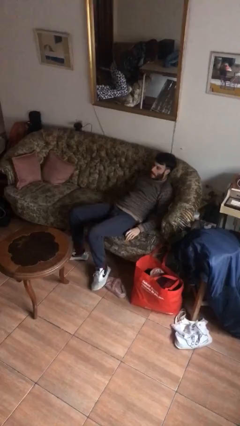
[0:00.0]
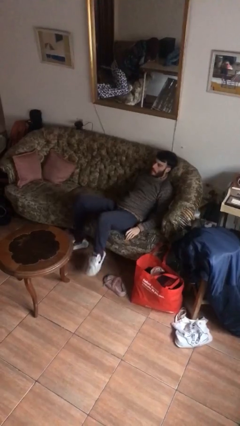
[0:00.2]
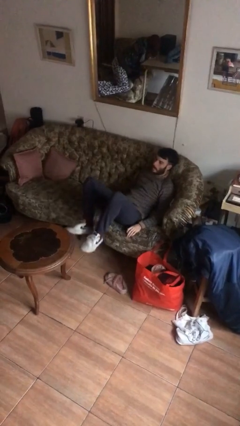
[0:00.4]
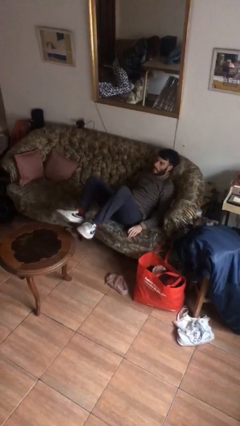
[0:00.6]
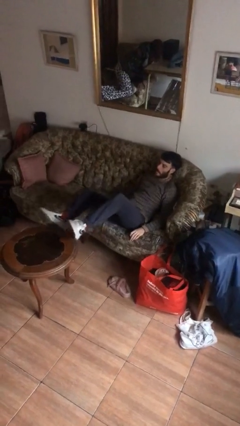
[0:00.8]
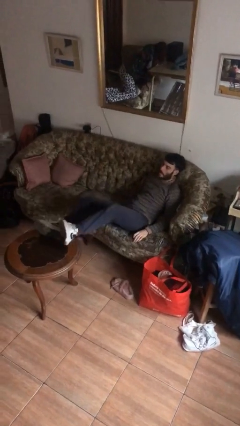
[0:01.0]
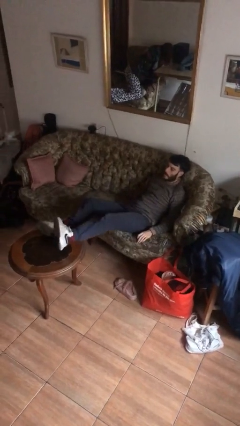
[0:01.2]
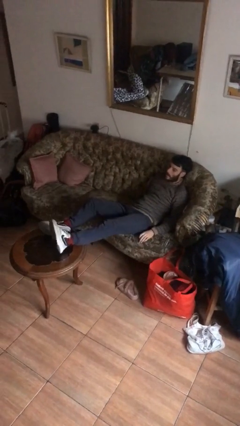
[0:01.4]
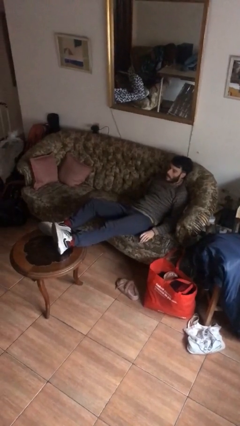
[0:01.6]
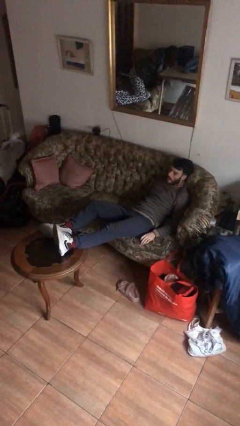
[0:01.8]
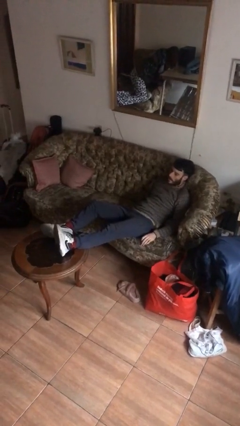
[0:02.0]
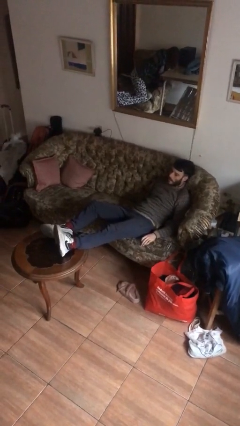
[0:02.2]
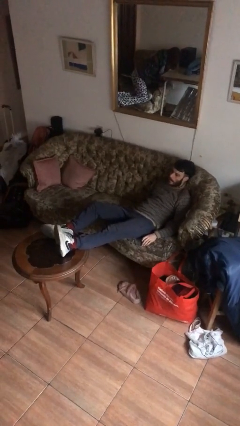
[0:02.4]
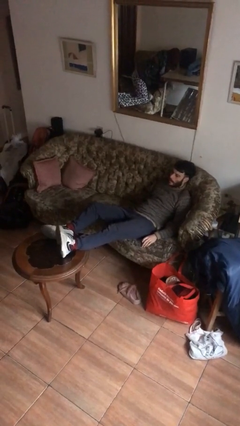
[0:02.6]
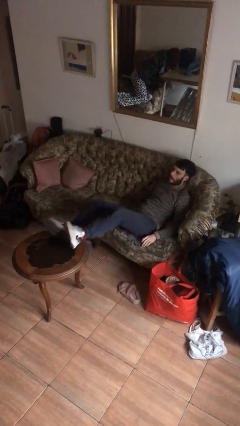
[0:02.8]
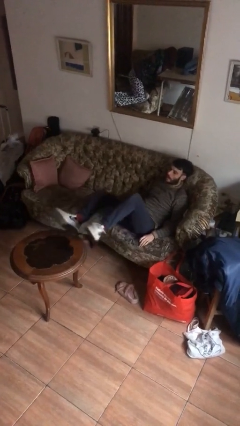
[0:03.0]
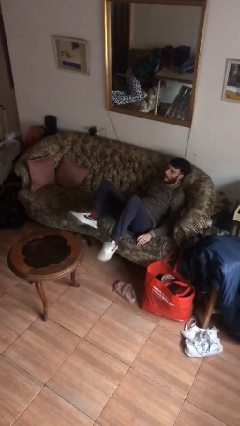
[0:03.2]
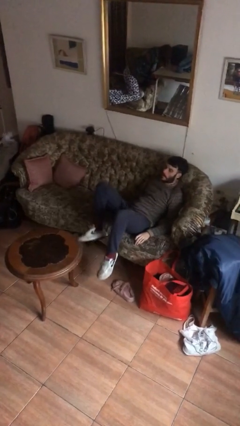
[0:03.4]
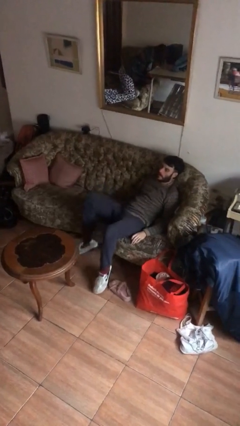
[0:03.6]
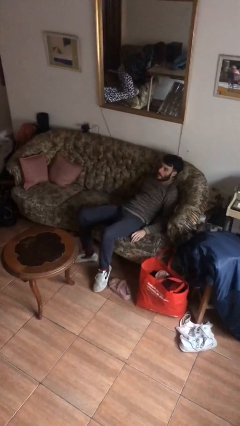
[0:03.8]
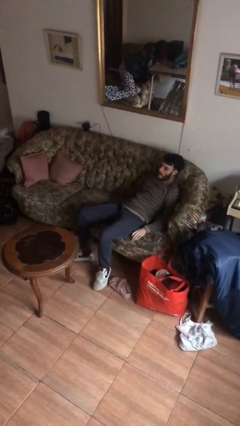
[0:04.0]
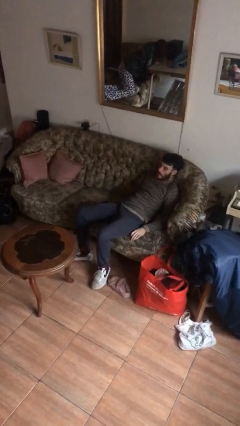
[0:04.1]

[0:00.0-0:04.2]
person puts feet up

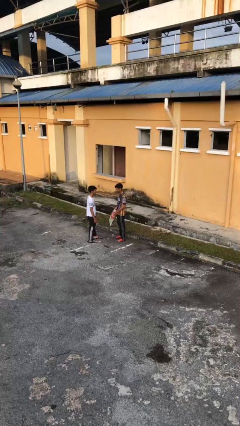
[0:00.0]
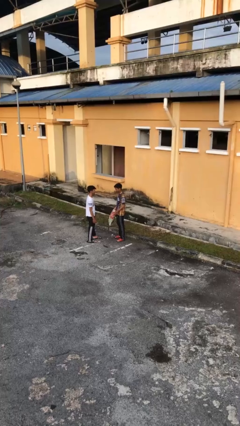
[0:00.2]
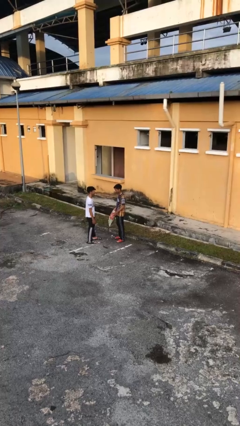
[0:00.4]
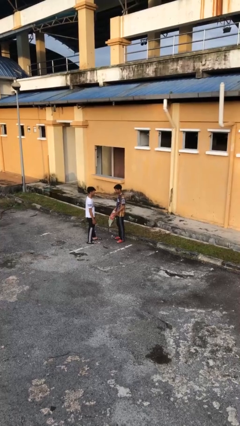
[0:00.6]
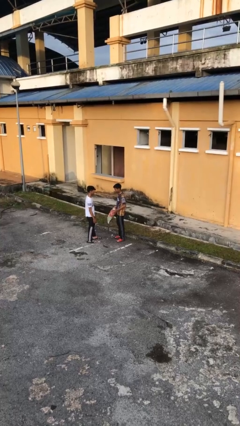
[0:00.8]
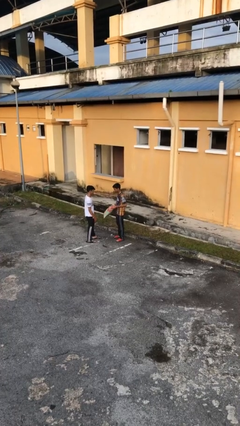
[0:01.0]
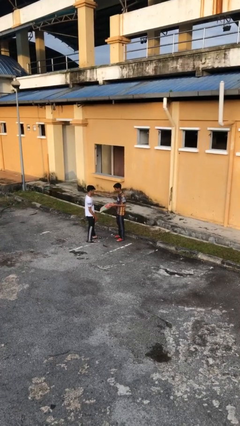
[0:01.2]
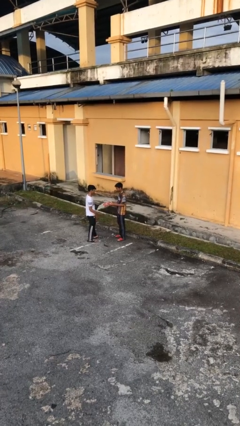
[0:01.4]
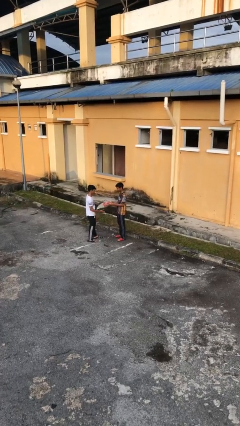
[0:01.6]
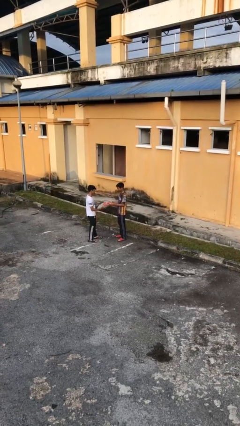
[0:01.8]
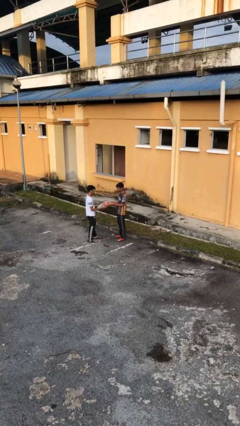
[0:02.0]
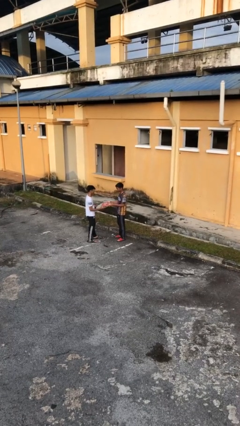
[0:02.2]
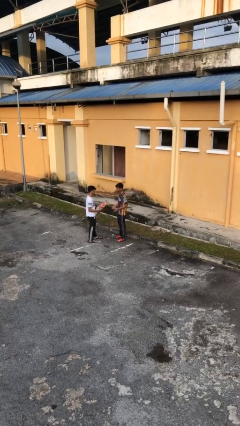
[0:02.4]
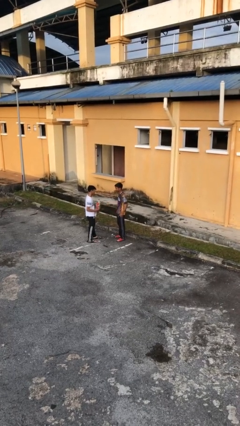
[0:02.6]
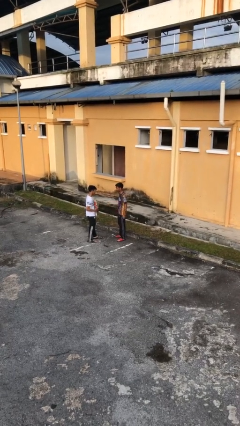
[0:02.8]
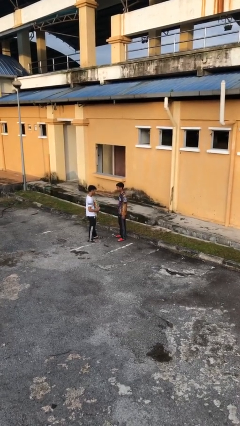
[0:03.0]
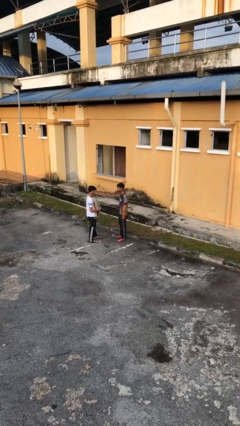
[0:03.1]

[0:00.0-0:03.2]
person transfers object to person

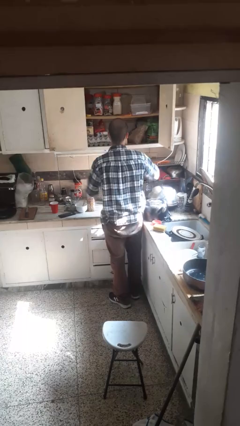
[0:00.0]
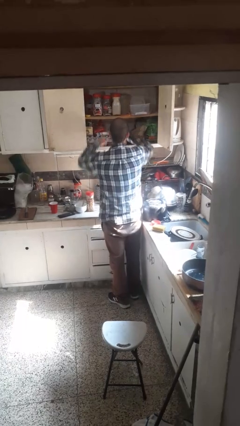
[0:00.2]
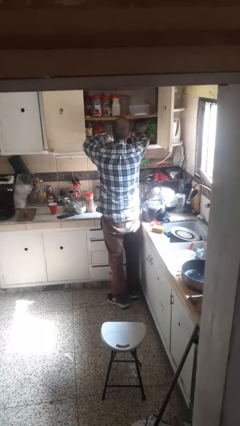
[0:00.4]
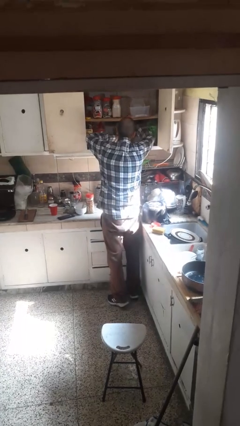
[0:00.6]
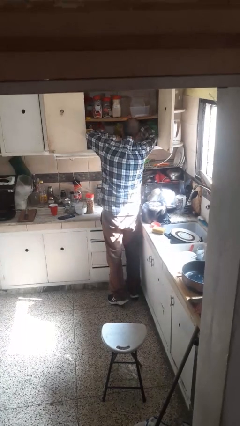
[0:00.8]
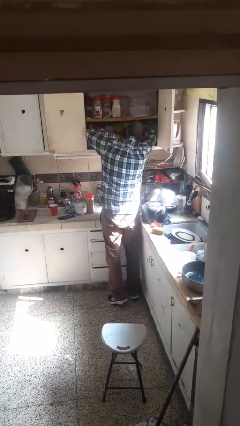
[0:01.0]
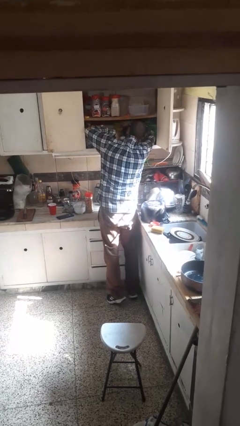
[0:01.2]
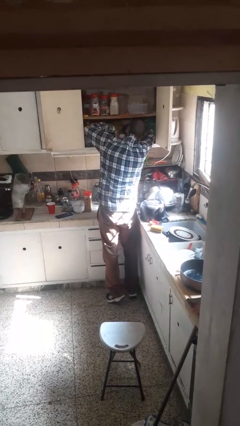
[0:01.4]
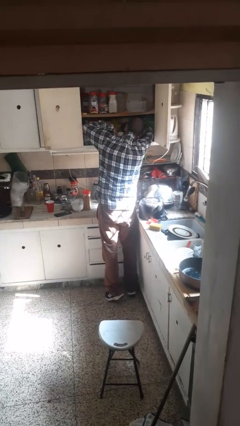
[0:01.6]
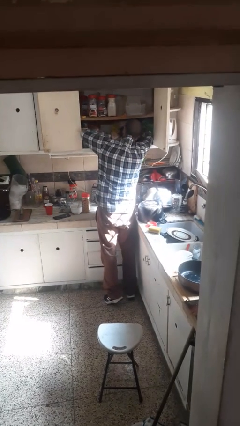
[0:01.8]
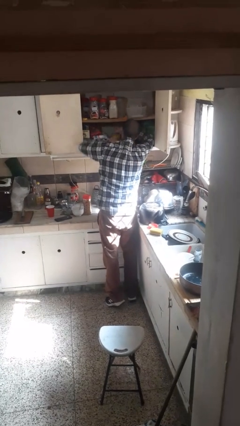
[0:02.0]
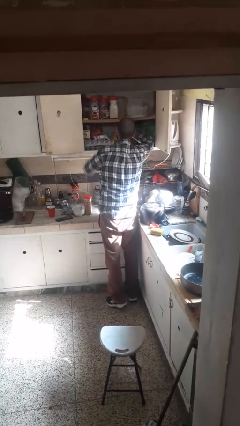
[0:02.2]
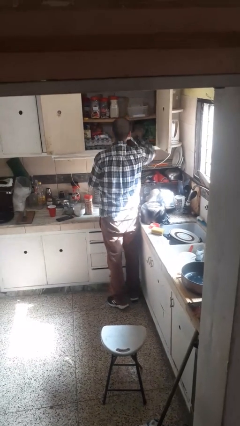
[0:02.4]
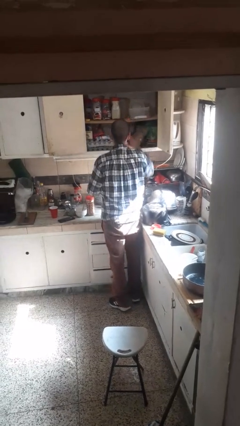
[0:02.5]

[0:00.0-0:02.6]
person searches in cabinet

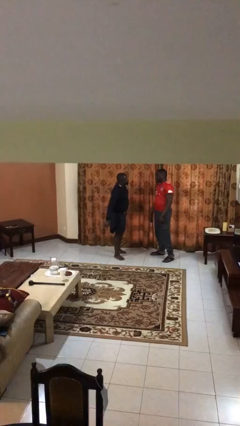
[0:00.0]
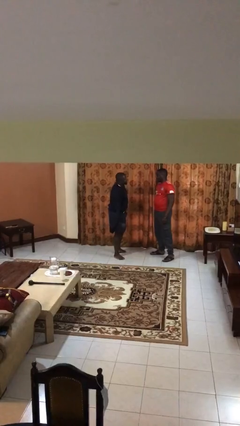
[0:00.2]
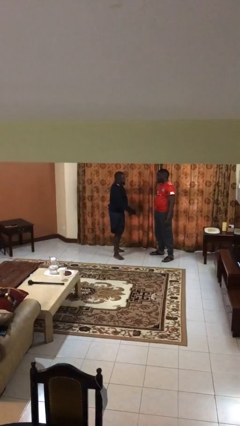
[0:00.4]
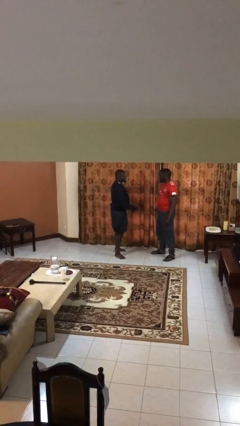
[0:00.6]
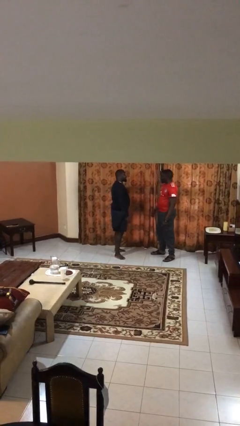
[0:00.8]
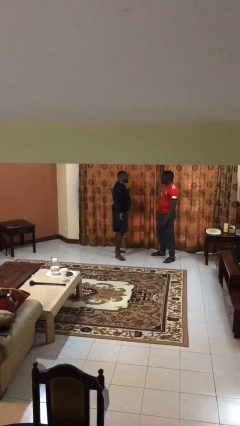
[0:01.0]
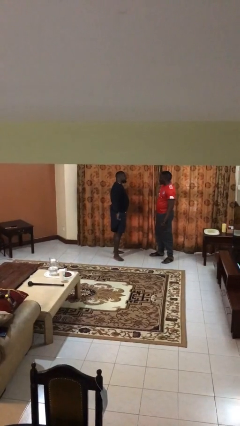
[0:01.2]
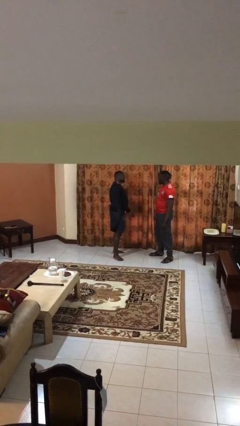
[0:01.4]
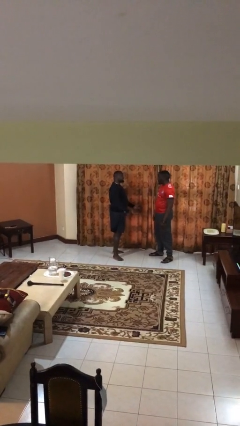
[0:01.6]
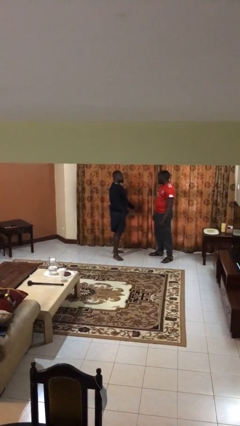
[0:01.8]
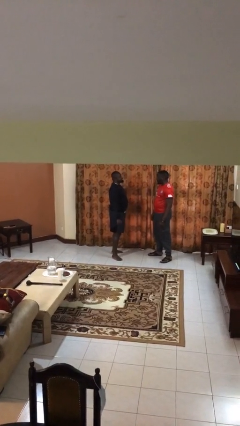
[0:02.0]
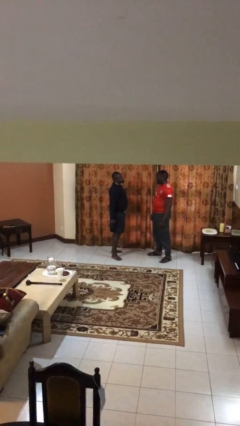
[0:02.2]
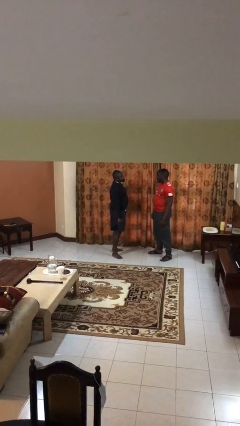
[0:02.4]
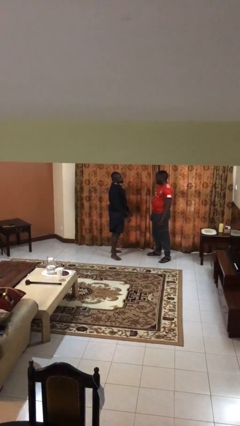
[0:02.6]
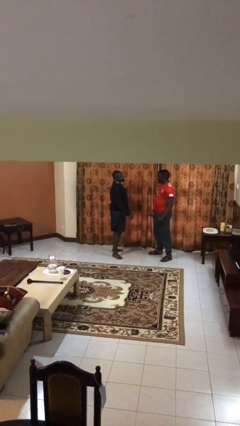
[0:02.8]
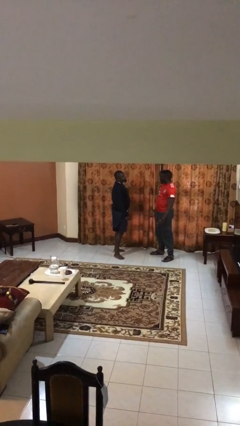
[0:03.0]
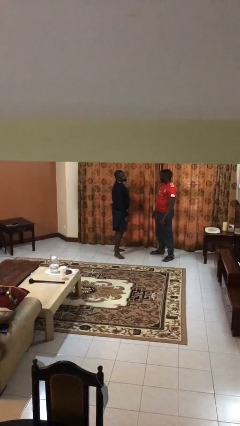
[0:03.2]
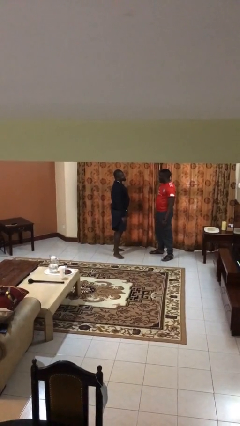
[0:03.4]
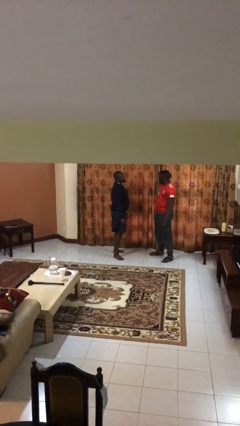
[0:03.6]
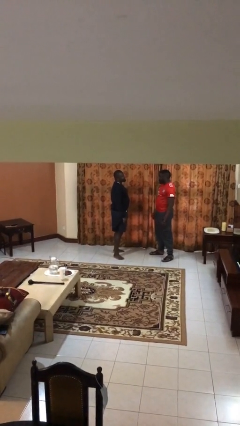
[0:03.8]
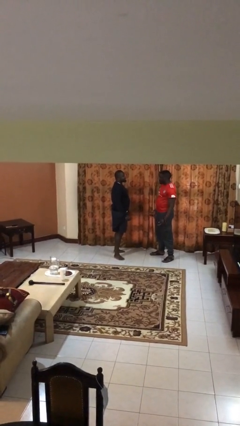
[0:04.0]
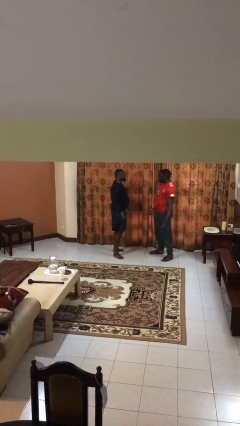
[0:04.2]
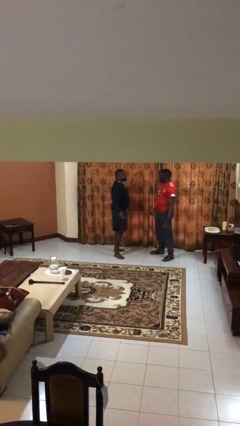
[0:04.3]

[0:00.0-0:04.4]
person talks to person

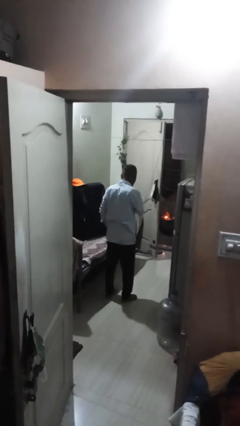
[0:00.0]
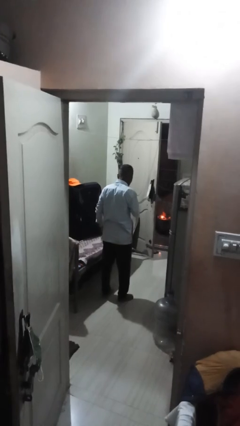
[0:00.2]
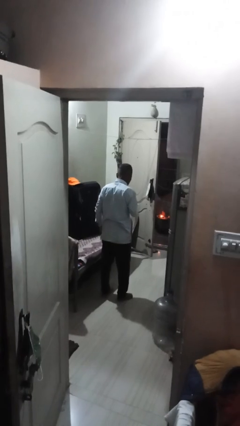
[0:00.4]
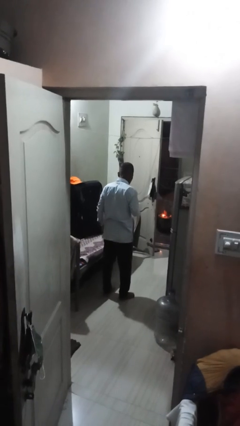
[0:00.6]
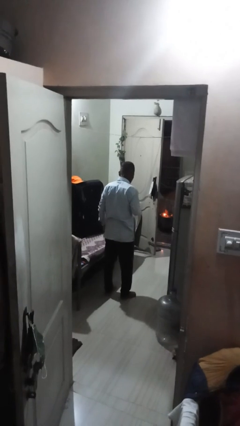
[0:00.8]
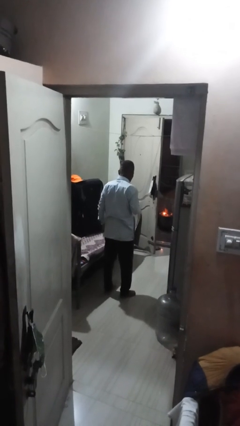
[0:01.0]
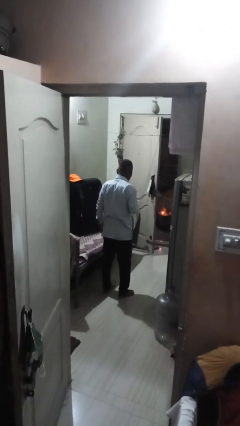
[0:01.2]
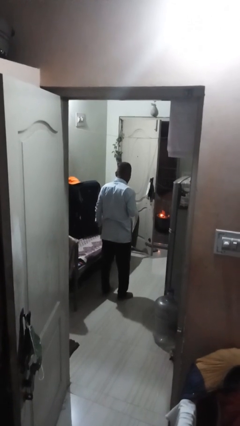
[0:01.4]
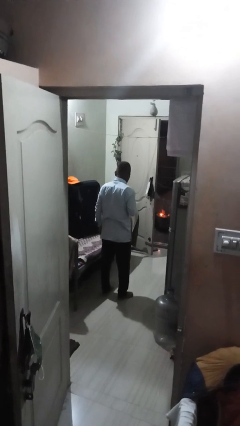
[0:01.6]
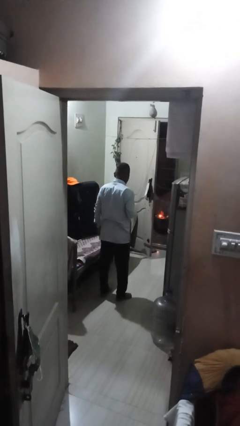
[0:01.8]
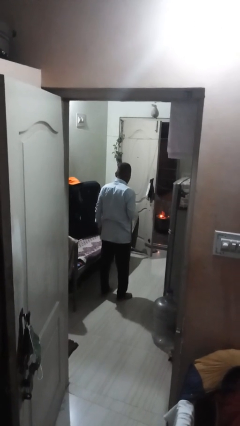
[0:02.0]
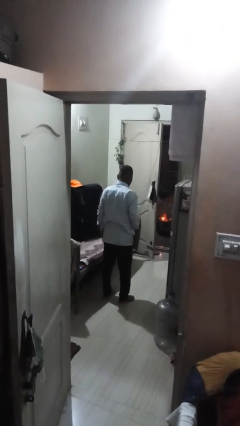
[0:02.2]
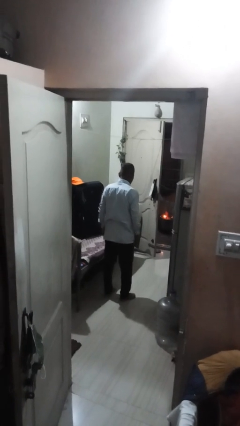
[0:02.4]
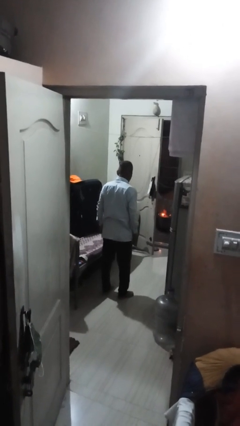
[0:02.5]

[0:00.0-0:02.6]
person swats bug

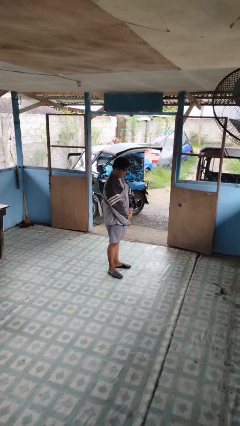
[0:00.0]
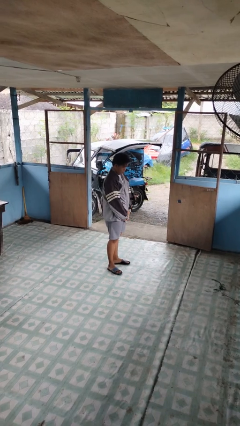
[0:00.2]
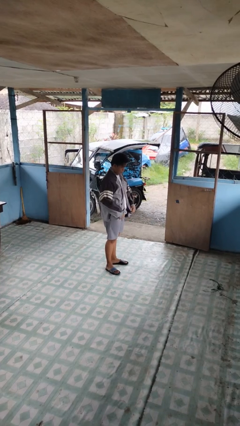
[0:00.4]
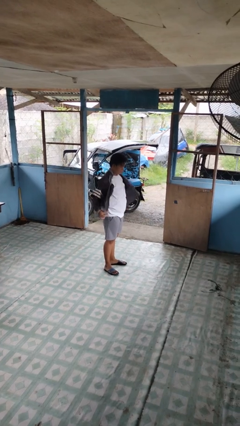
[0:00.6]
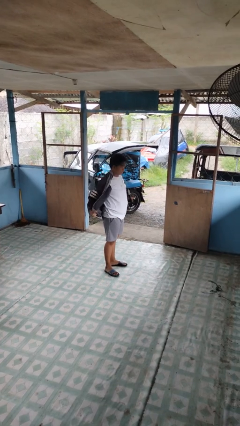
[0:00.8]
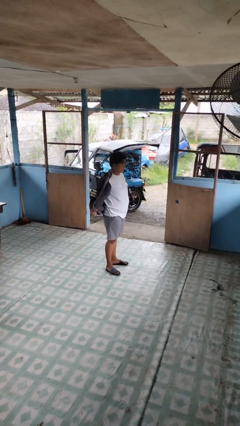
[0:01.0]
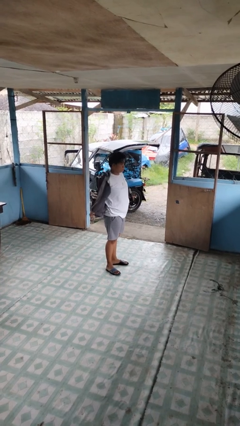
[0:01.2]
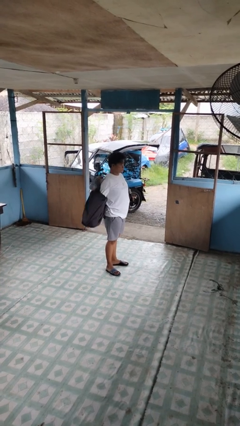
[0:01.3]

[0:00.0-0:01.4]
person unzips jacket
